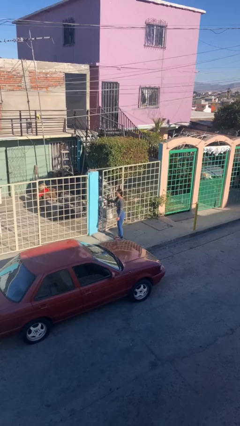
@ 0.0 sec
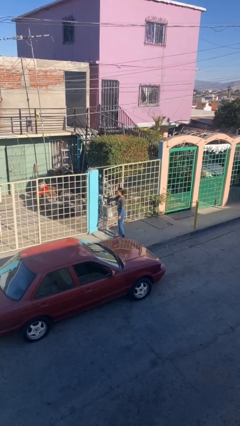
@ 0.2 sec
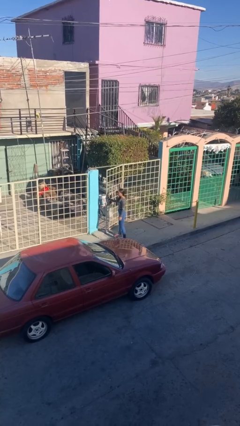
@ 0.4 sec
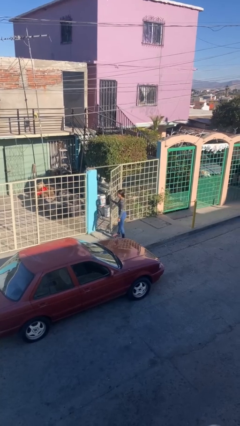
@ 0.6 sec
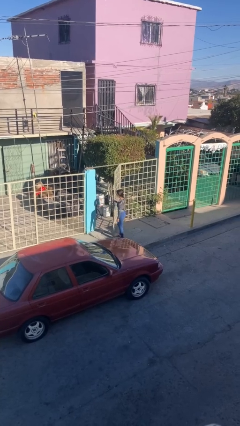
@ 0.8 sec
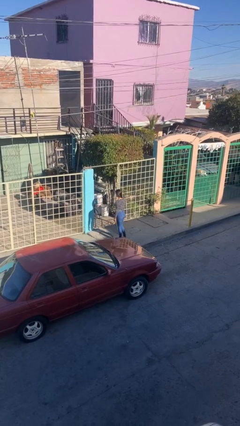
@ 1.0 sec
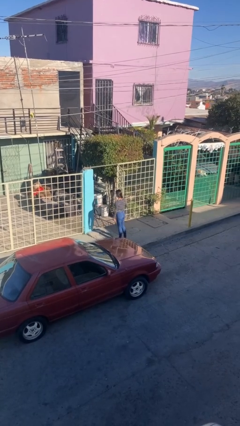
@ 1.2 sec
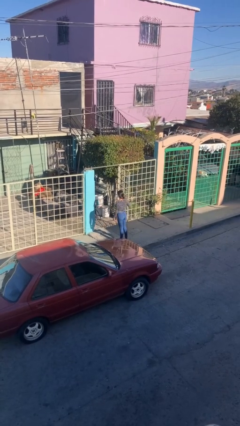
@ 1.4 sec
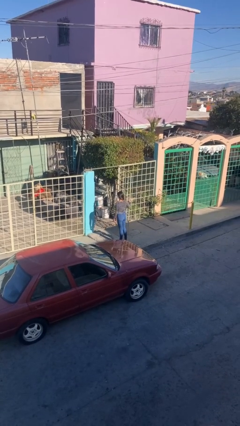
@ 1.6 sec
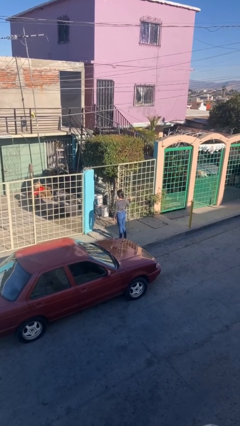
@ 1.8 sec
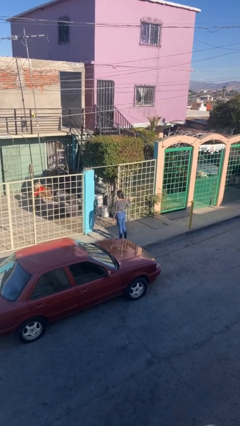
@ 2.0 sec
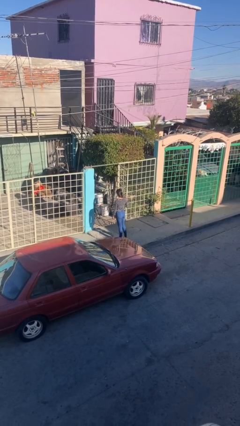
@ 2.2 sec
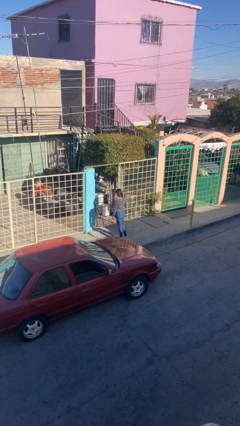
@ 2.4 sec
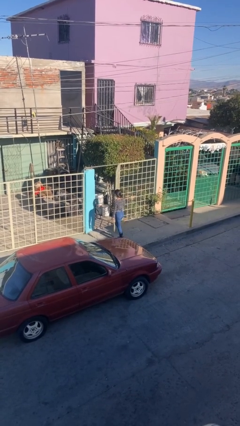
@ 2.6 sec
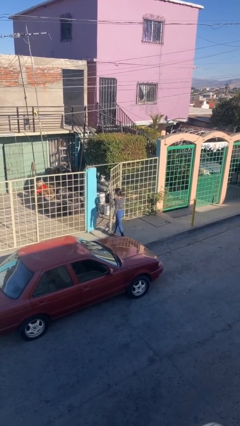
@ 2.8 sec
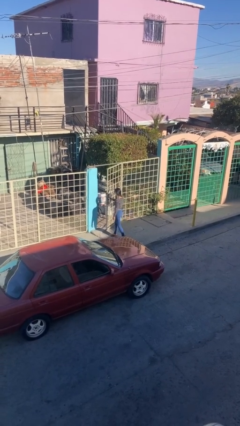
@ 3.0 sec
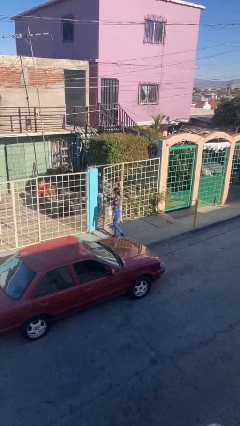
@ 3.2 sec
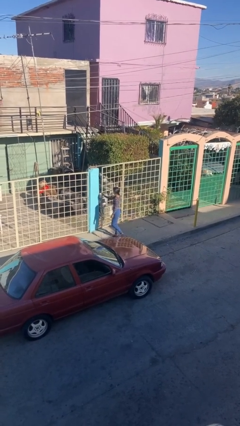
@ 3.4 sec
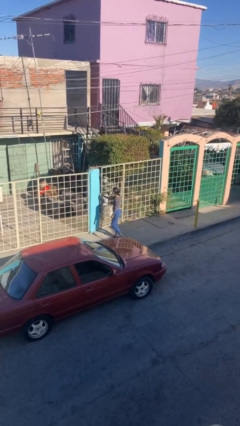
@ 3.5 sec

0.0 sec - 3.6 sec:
person opens facility door

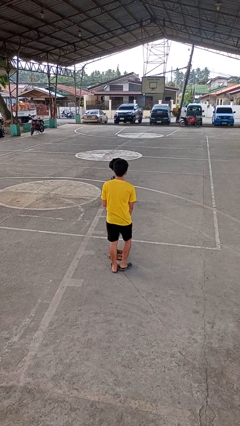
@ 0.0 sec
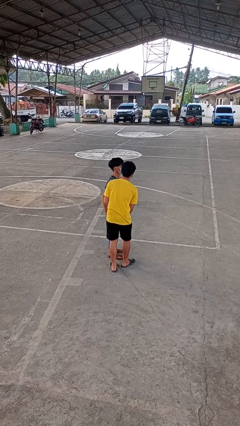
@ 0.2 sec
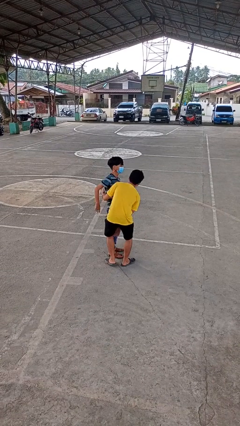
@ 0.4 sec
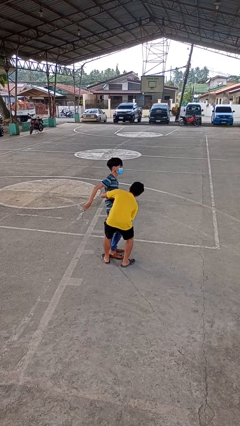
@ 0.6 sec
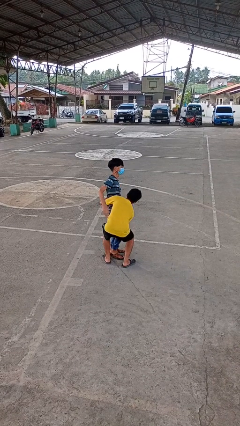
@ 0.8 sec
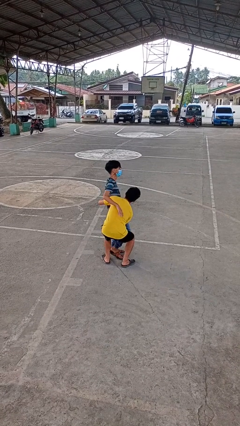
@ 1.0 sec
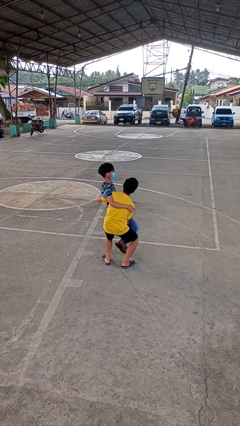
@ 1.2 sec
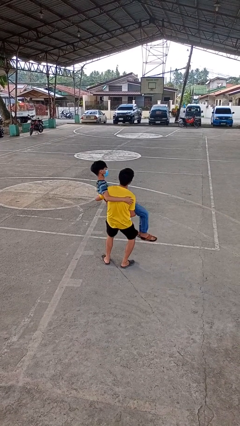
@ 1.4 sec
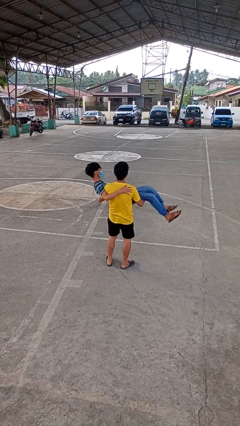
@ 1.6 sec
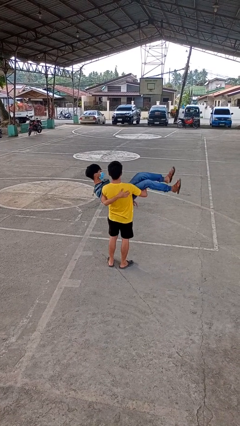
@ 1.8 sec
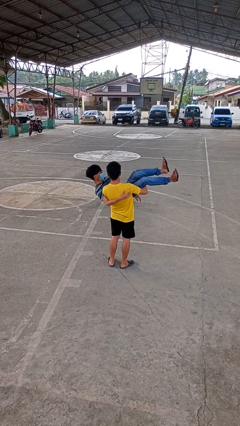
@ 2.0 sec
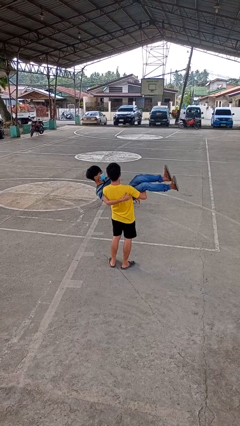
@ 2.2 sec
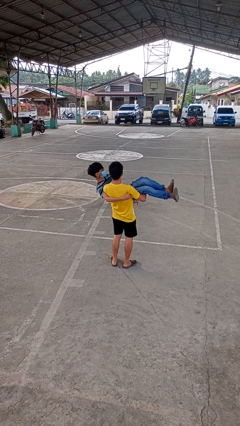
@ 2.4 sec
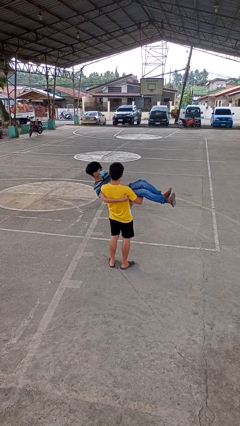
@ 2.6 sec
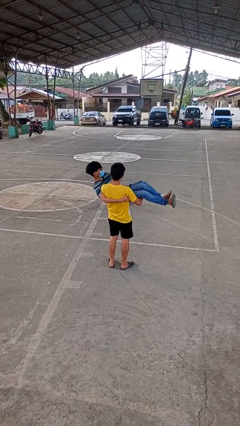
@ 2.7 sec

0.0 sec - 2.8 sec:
person picks up person

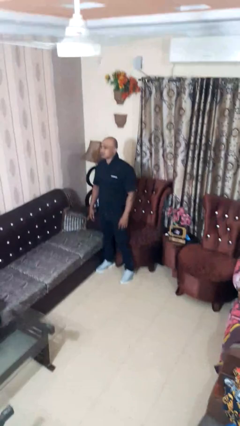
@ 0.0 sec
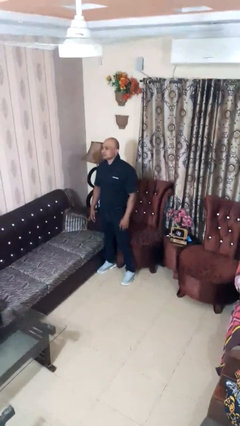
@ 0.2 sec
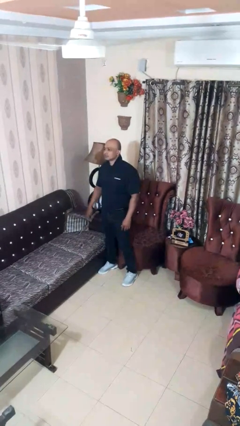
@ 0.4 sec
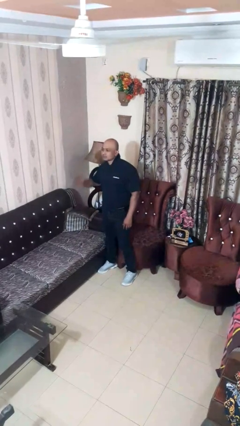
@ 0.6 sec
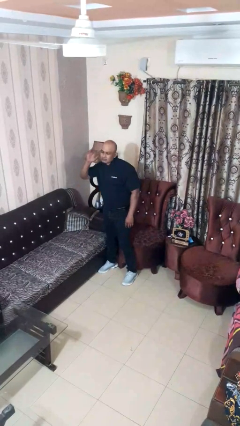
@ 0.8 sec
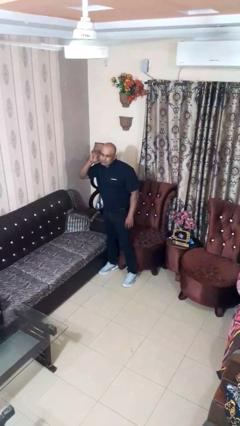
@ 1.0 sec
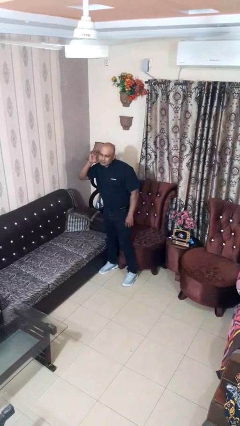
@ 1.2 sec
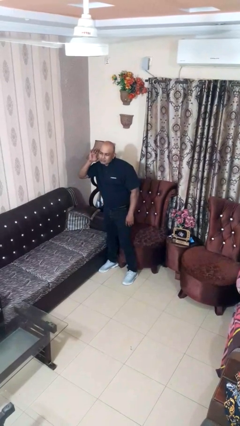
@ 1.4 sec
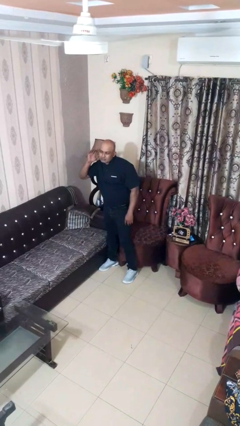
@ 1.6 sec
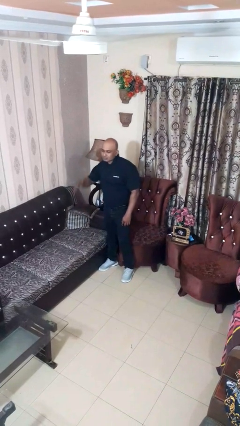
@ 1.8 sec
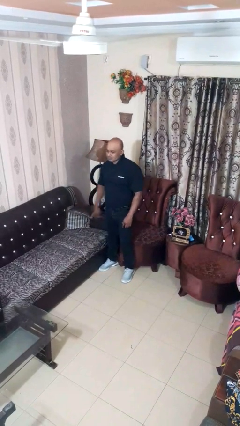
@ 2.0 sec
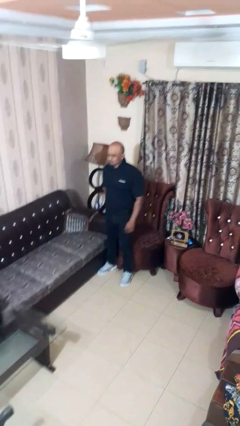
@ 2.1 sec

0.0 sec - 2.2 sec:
person gestures listen closely

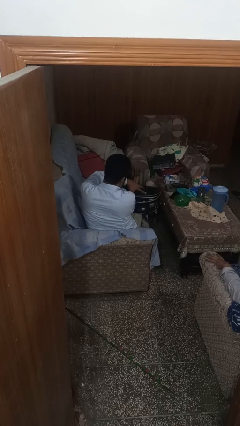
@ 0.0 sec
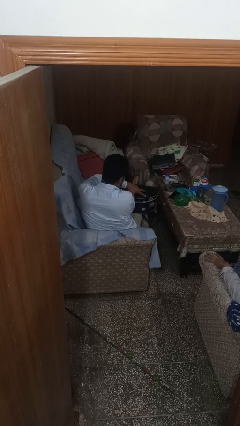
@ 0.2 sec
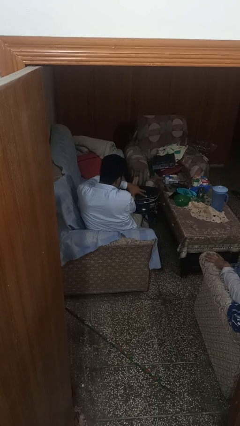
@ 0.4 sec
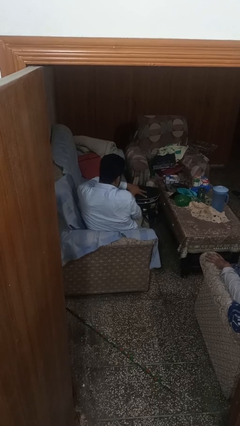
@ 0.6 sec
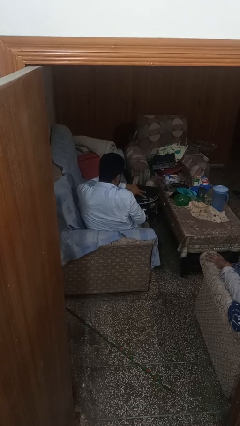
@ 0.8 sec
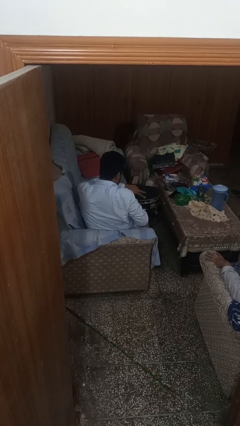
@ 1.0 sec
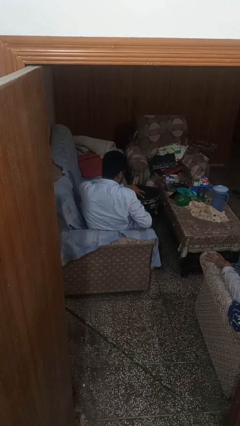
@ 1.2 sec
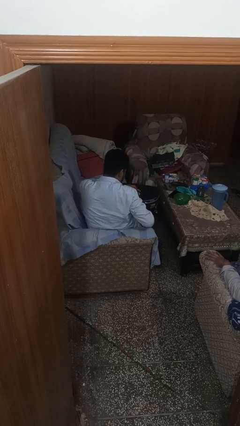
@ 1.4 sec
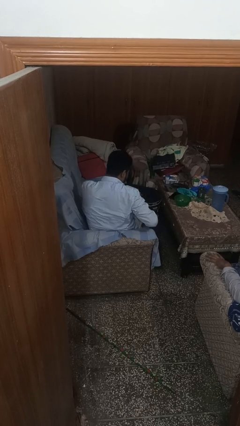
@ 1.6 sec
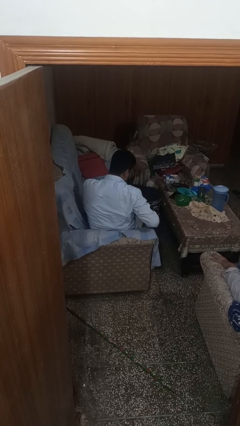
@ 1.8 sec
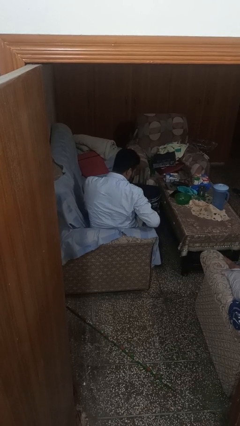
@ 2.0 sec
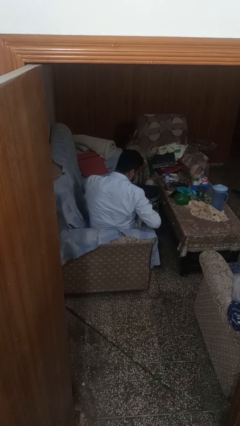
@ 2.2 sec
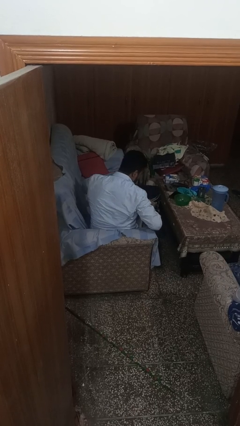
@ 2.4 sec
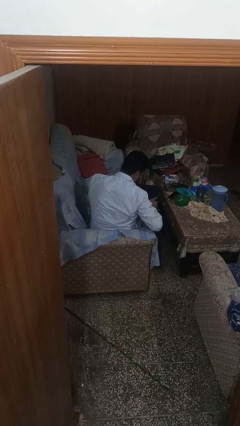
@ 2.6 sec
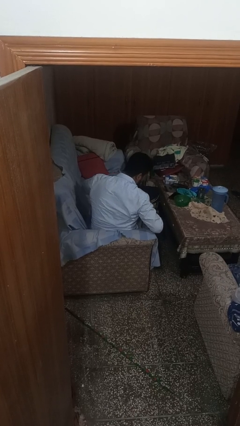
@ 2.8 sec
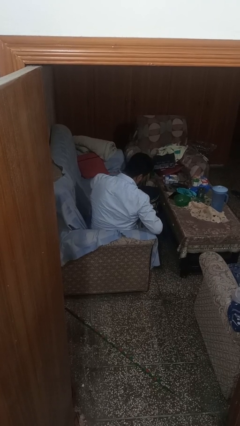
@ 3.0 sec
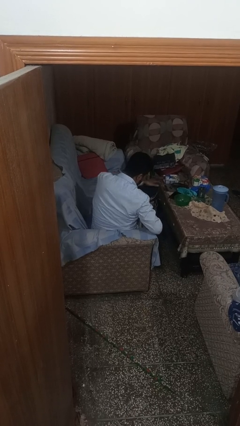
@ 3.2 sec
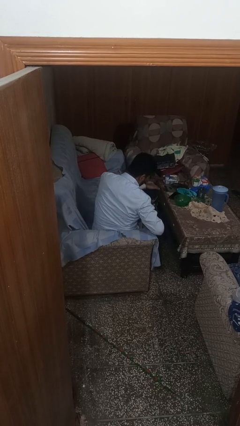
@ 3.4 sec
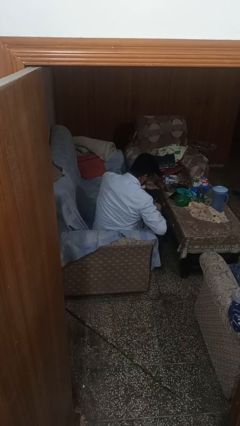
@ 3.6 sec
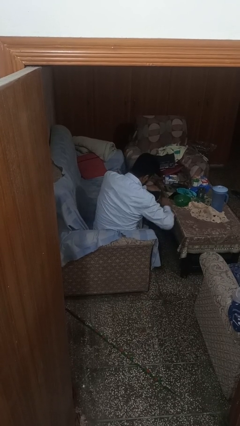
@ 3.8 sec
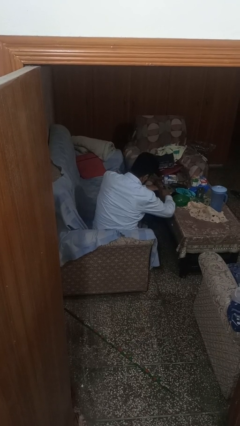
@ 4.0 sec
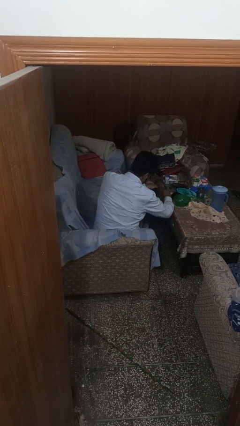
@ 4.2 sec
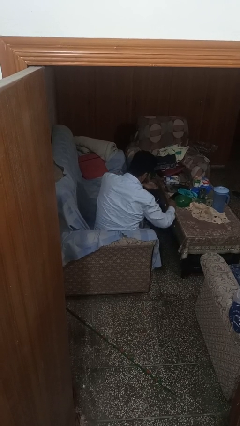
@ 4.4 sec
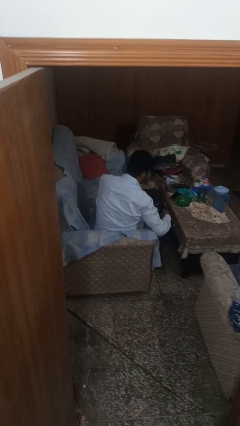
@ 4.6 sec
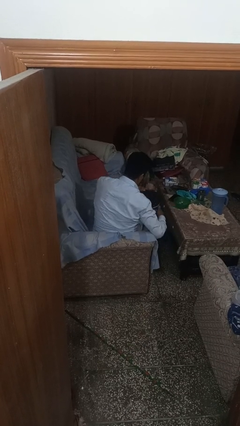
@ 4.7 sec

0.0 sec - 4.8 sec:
person closes suitcase

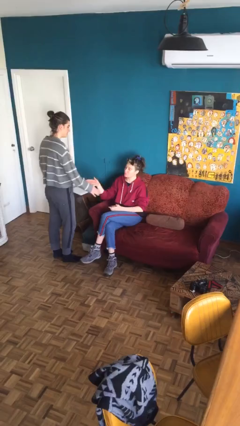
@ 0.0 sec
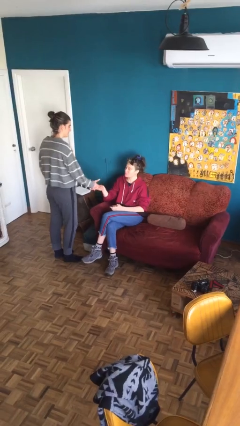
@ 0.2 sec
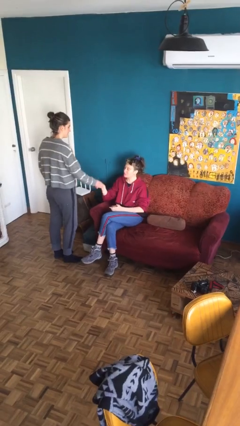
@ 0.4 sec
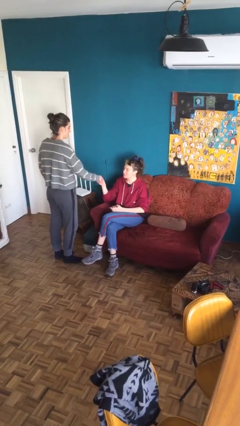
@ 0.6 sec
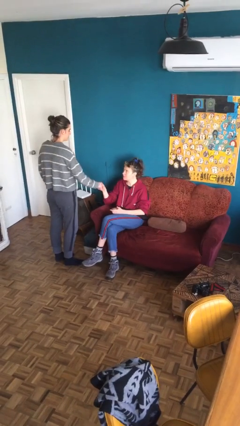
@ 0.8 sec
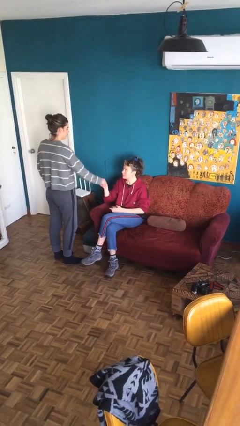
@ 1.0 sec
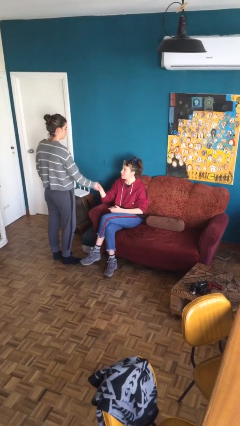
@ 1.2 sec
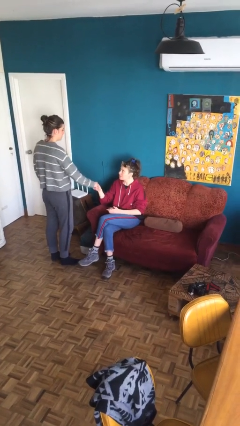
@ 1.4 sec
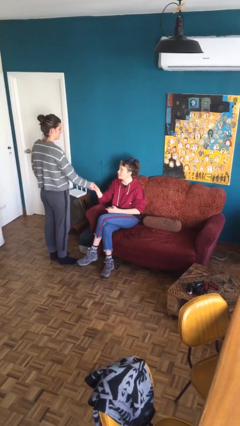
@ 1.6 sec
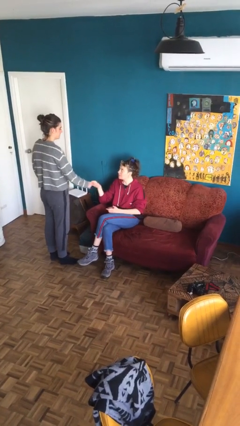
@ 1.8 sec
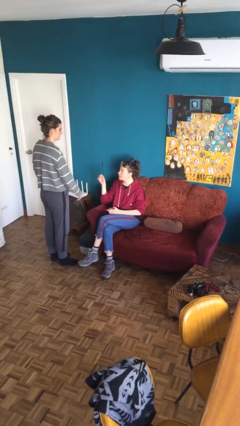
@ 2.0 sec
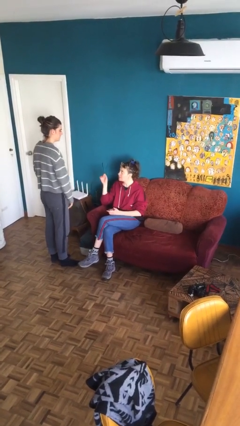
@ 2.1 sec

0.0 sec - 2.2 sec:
person shakes hand

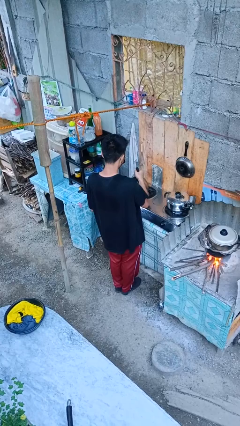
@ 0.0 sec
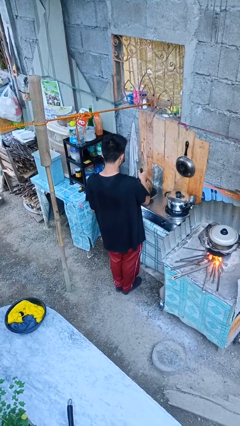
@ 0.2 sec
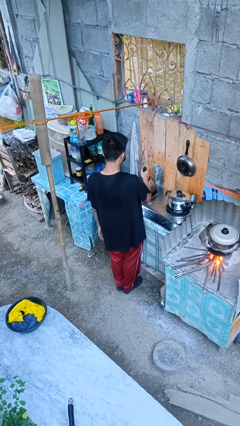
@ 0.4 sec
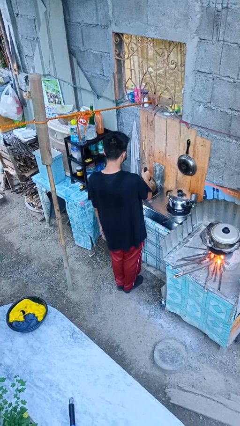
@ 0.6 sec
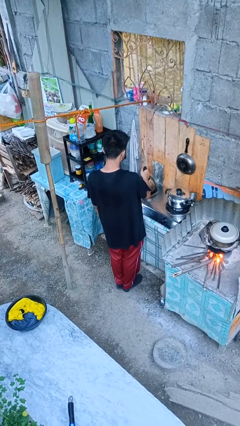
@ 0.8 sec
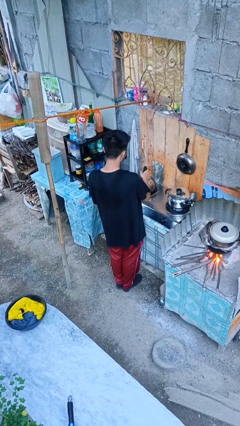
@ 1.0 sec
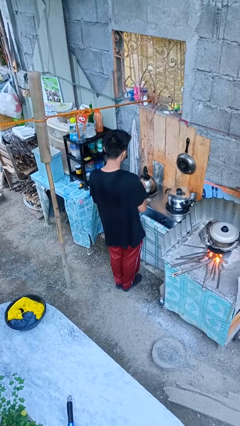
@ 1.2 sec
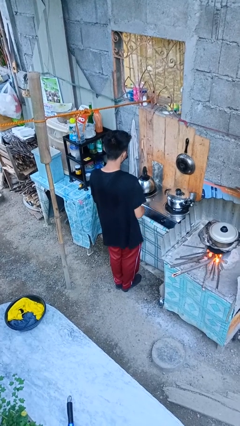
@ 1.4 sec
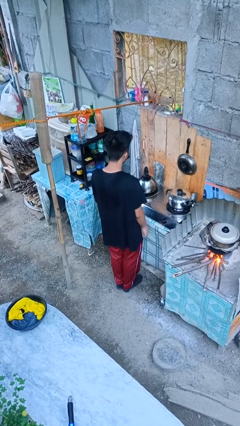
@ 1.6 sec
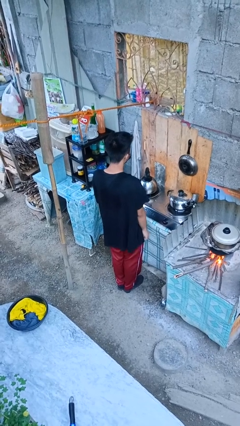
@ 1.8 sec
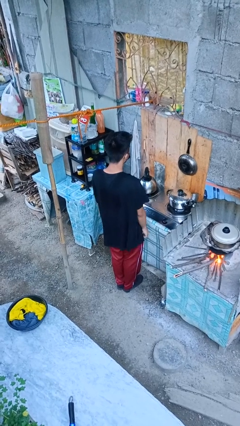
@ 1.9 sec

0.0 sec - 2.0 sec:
person puts down object on countertop
